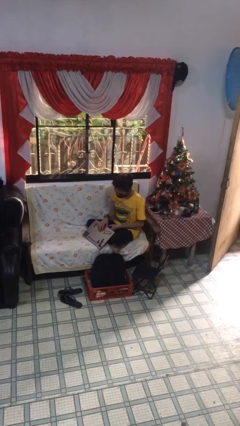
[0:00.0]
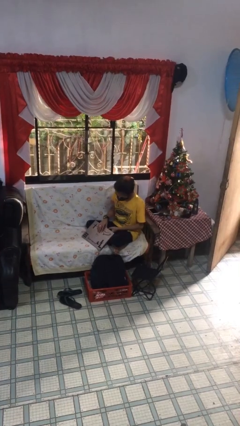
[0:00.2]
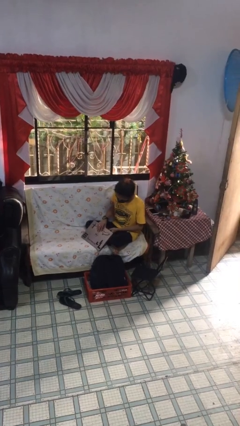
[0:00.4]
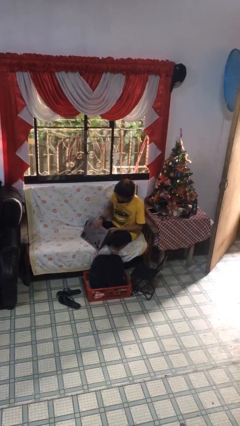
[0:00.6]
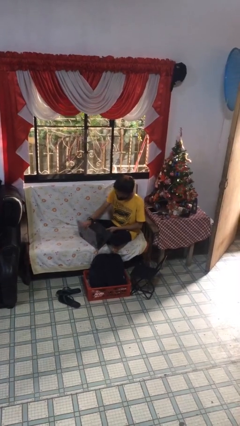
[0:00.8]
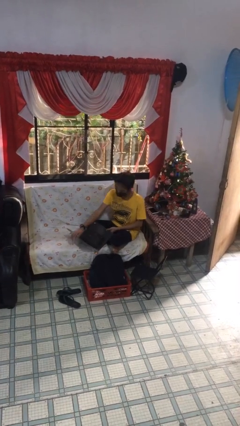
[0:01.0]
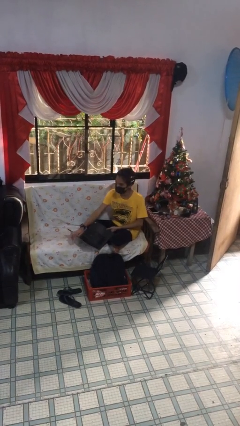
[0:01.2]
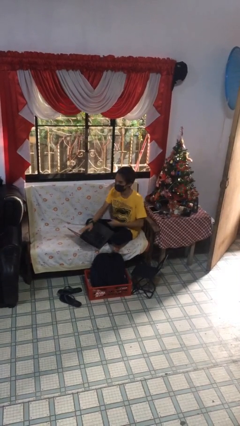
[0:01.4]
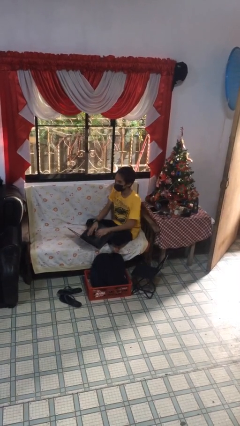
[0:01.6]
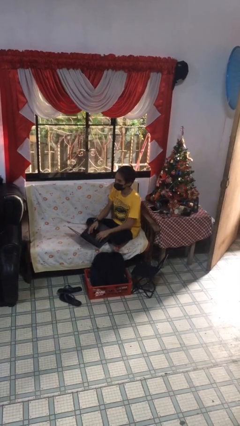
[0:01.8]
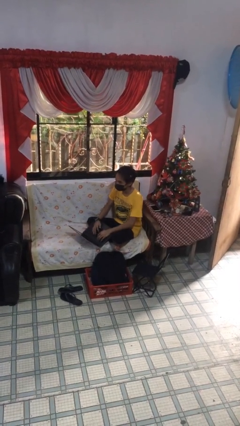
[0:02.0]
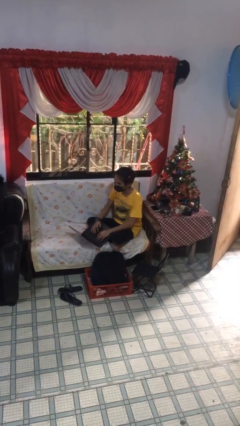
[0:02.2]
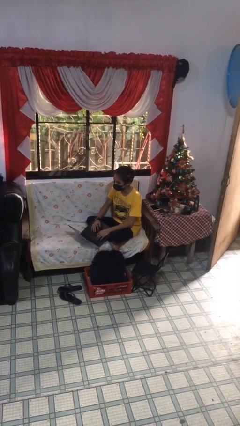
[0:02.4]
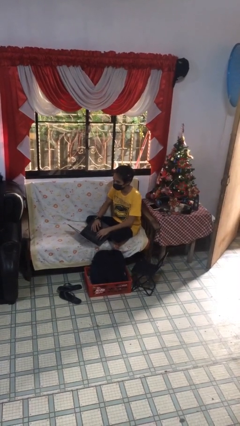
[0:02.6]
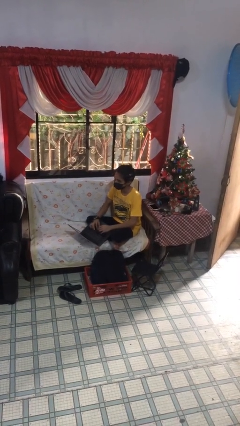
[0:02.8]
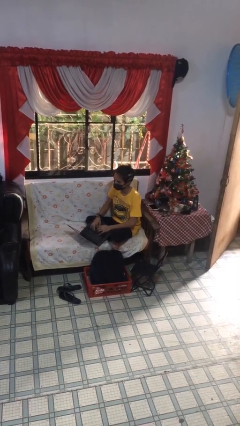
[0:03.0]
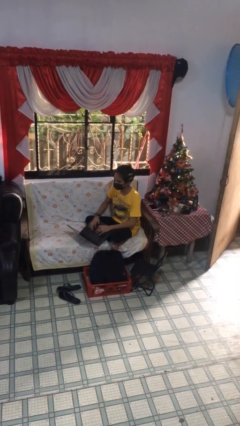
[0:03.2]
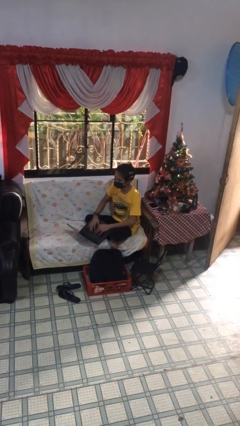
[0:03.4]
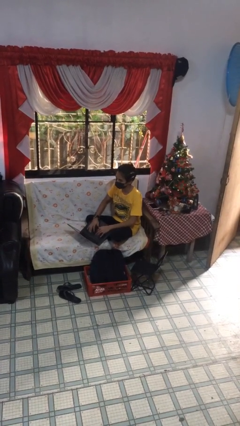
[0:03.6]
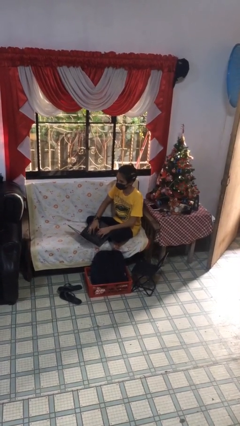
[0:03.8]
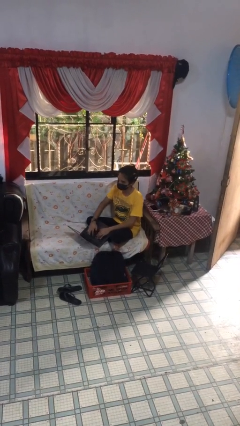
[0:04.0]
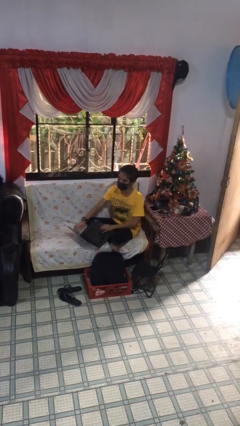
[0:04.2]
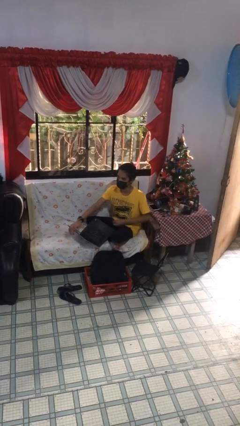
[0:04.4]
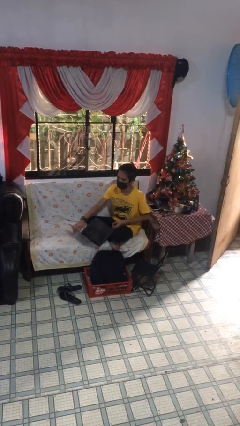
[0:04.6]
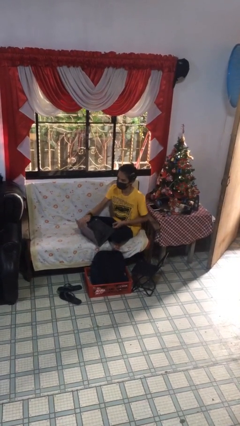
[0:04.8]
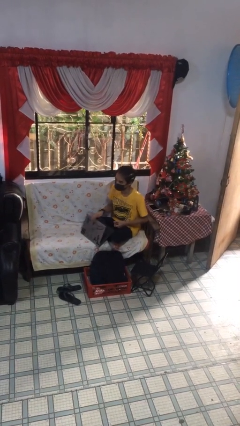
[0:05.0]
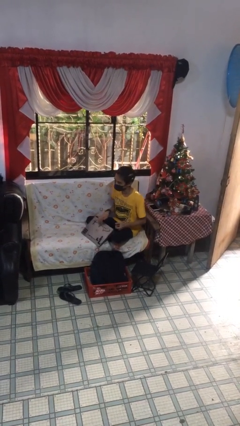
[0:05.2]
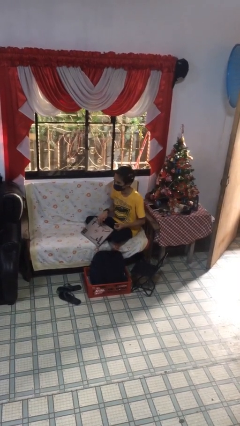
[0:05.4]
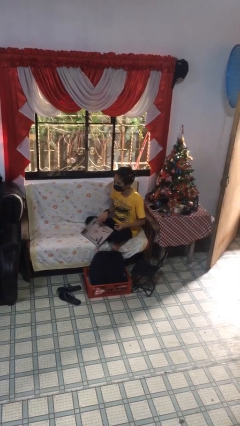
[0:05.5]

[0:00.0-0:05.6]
person interacts with laptop

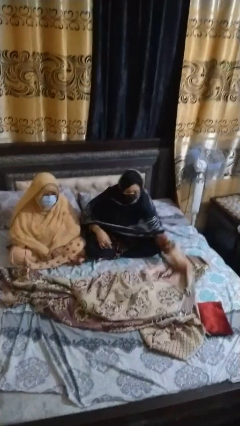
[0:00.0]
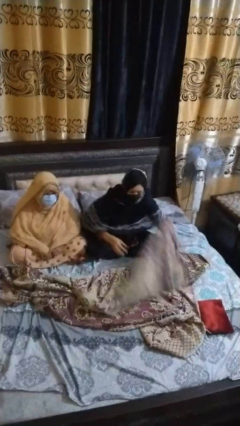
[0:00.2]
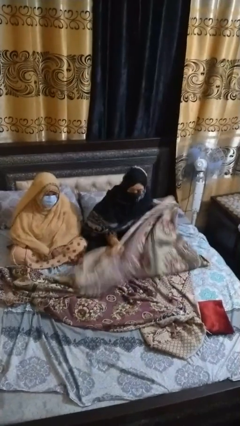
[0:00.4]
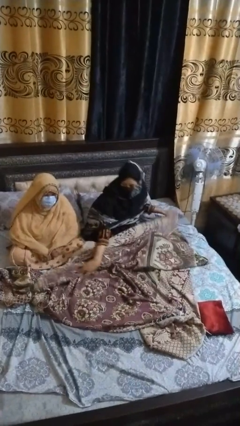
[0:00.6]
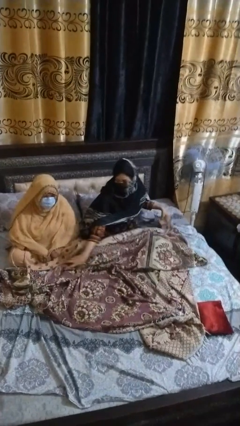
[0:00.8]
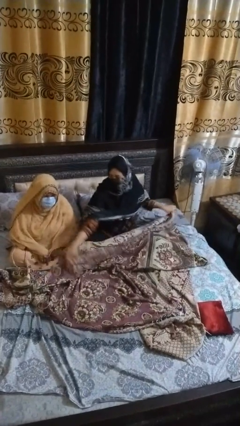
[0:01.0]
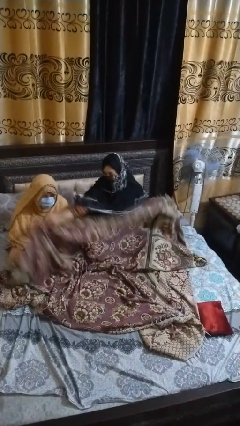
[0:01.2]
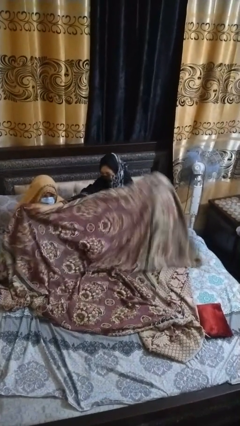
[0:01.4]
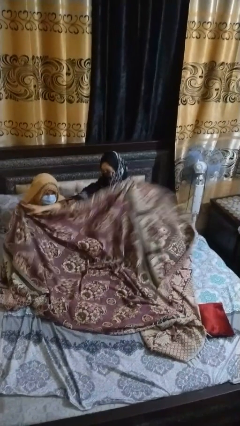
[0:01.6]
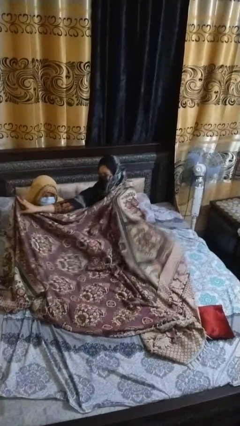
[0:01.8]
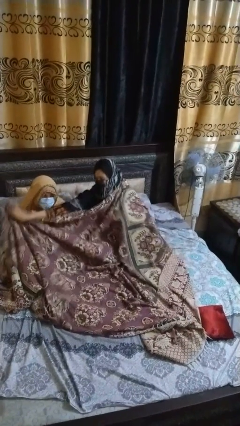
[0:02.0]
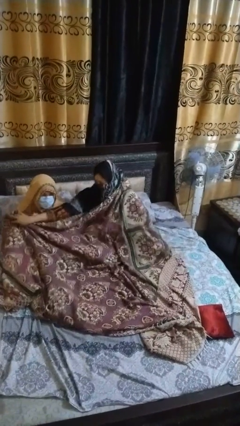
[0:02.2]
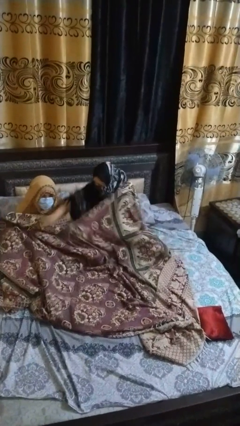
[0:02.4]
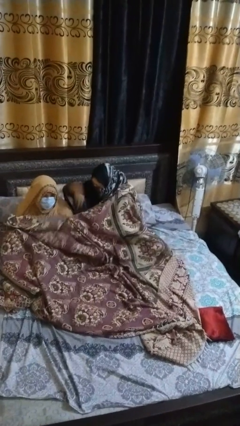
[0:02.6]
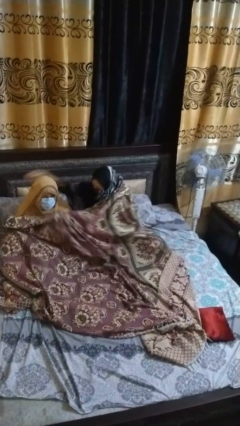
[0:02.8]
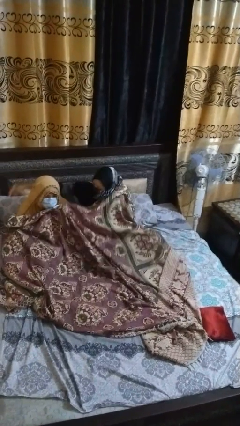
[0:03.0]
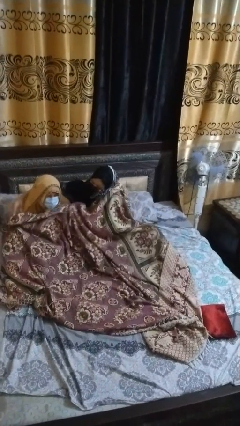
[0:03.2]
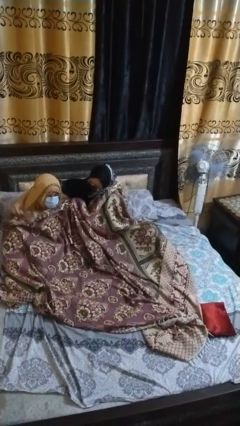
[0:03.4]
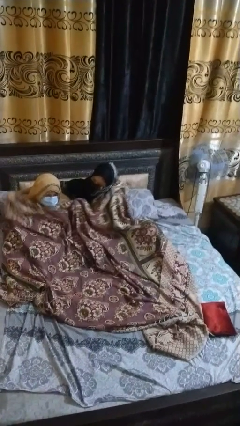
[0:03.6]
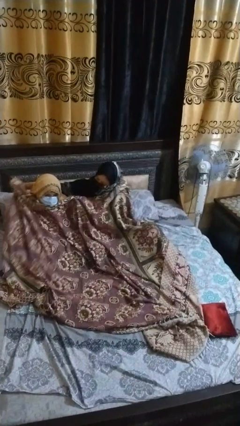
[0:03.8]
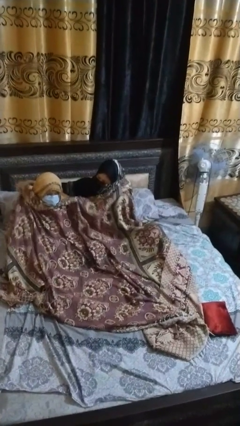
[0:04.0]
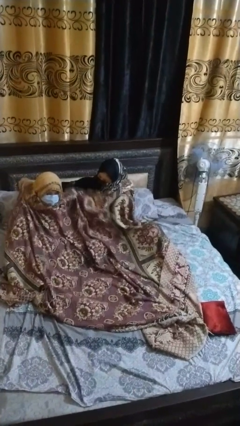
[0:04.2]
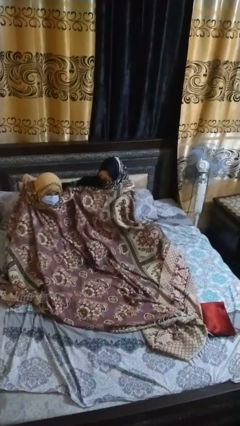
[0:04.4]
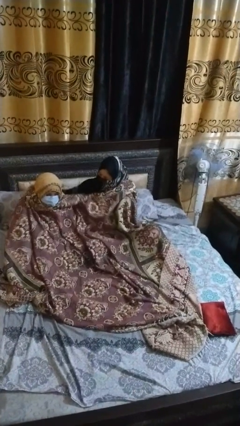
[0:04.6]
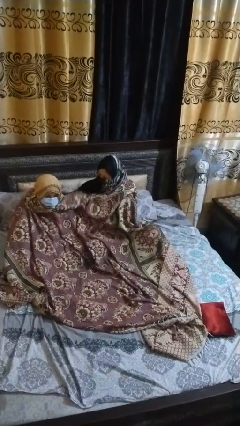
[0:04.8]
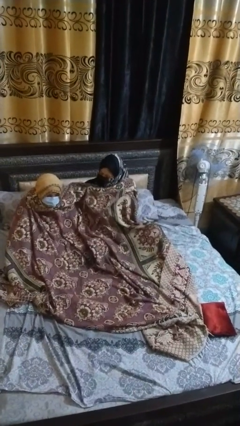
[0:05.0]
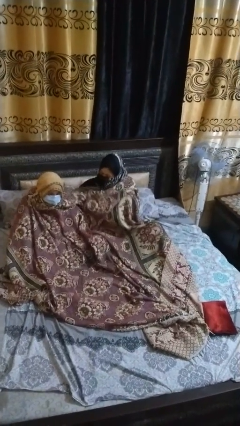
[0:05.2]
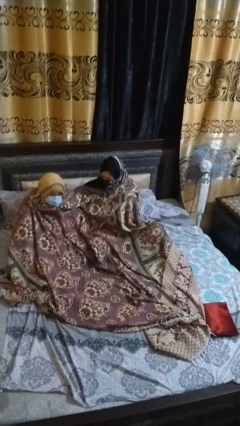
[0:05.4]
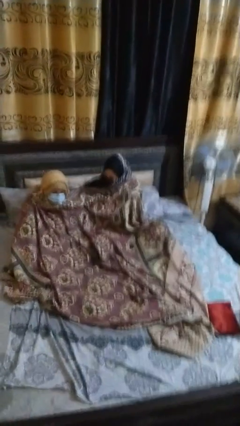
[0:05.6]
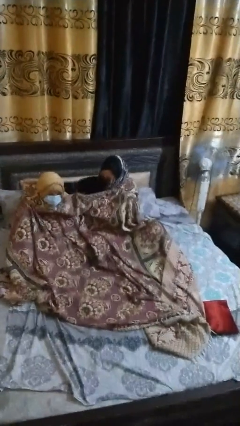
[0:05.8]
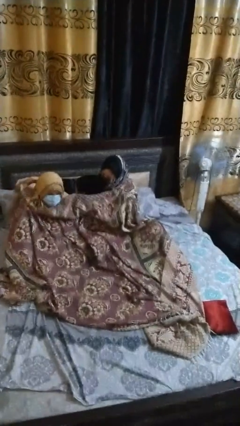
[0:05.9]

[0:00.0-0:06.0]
person covers friend with blanket

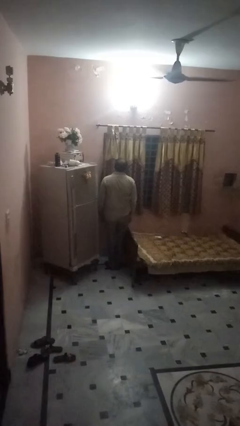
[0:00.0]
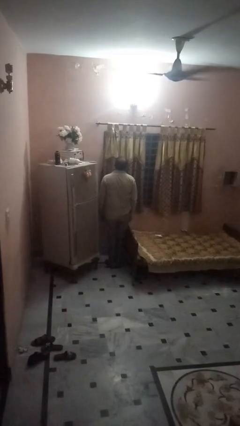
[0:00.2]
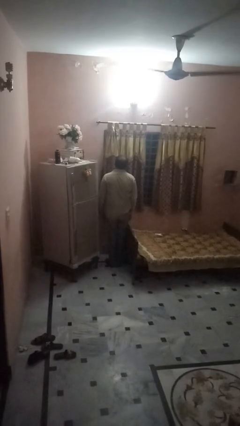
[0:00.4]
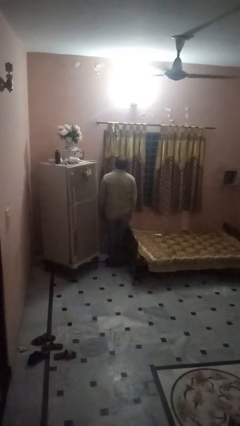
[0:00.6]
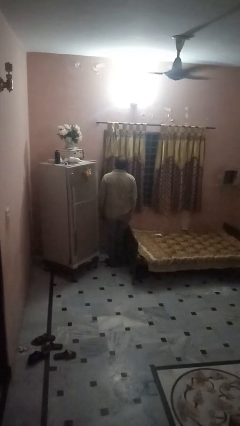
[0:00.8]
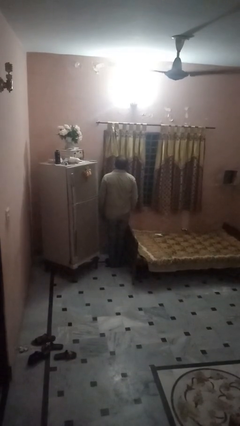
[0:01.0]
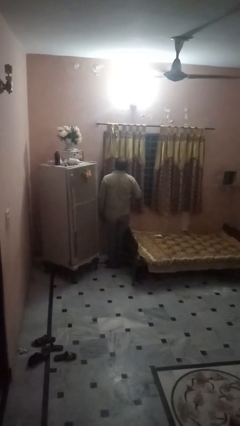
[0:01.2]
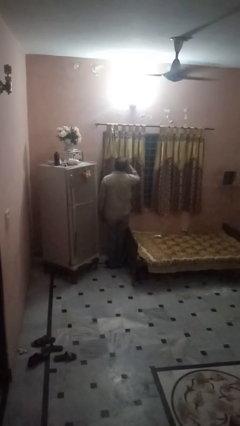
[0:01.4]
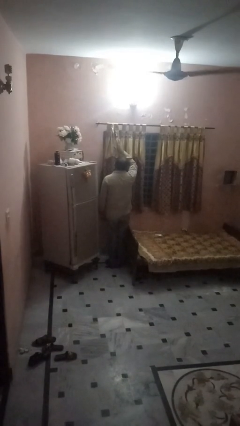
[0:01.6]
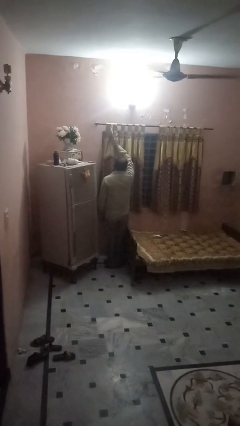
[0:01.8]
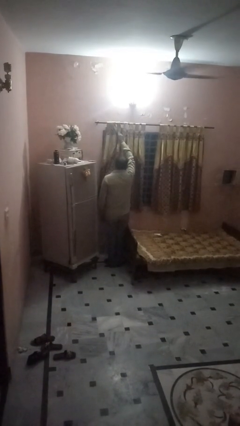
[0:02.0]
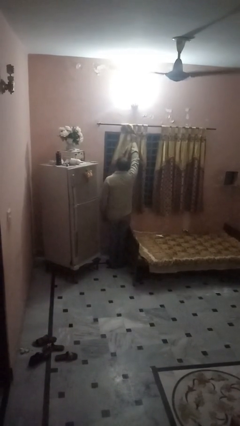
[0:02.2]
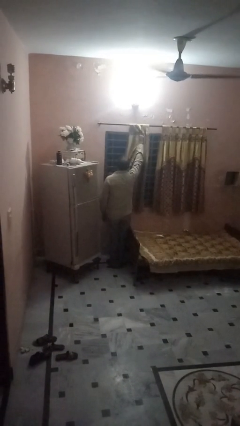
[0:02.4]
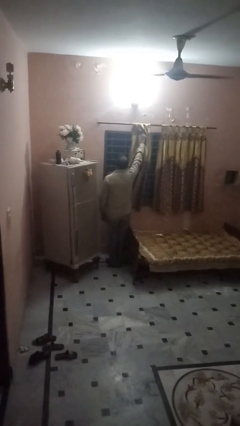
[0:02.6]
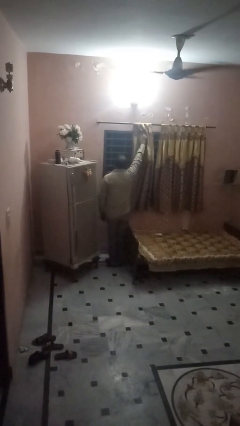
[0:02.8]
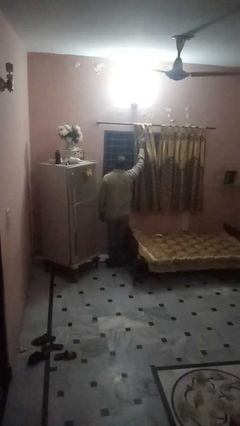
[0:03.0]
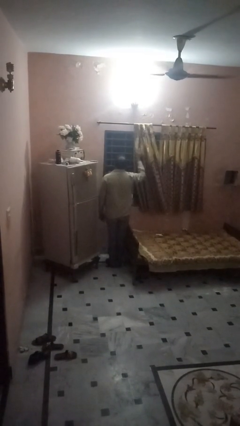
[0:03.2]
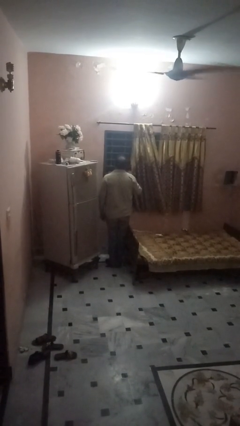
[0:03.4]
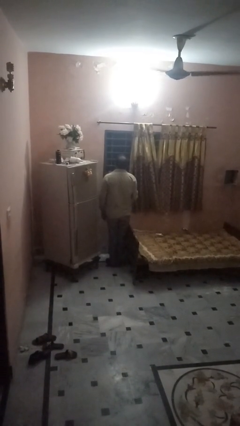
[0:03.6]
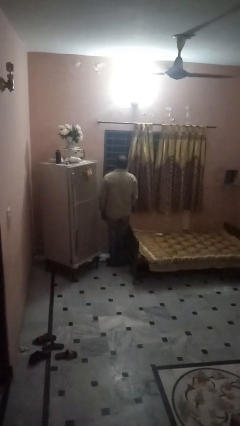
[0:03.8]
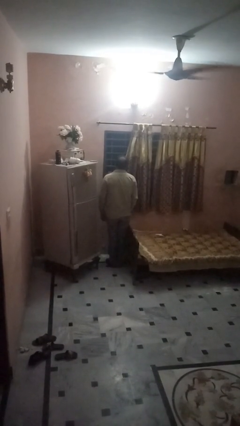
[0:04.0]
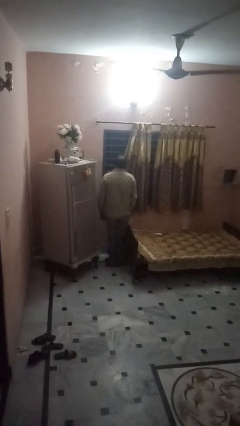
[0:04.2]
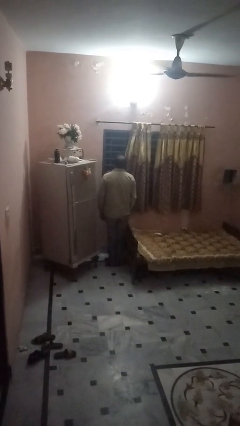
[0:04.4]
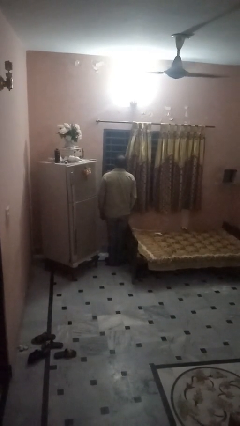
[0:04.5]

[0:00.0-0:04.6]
person opens curtains

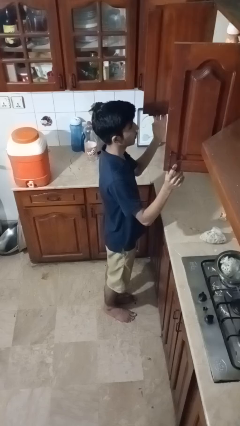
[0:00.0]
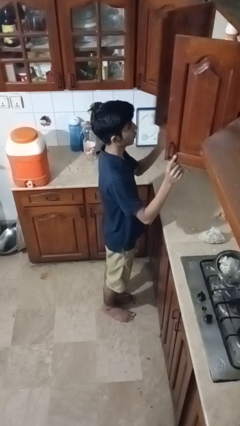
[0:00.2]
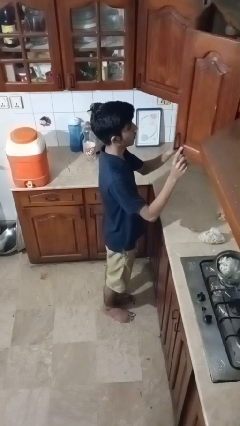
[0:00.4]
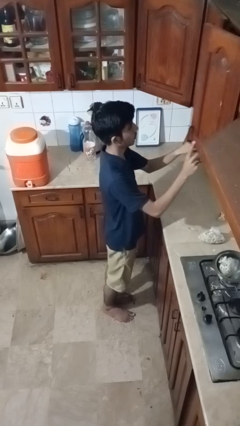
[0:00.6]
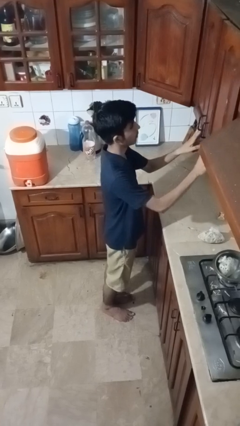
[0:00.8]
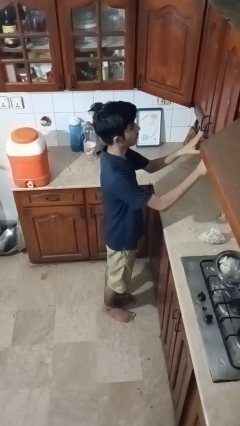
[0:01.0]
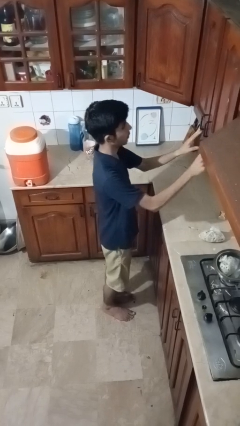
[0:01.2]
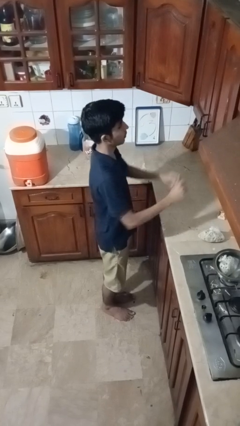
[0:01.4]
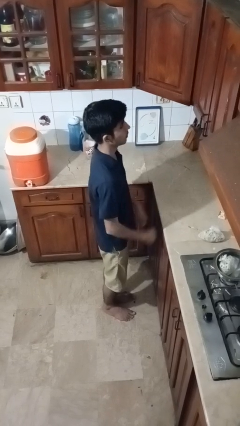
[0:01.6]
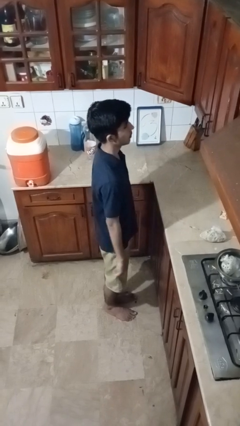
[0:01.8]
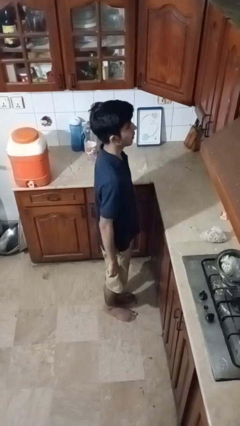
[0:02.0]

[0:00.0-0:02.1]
person closes cabinet
